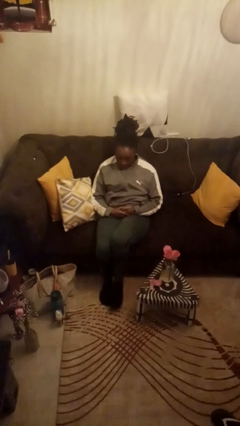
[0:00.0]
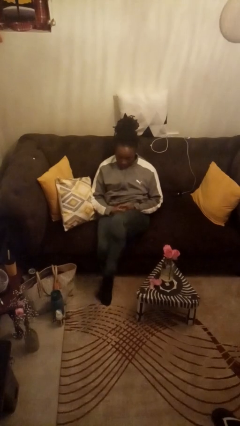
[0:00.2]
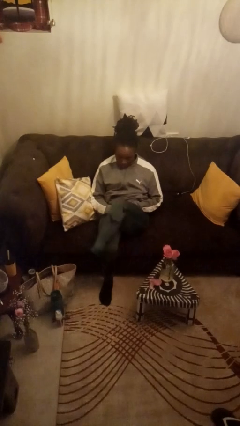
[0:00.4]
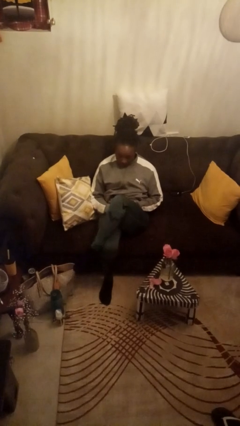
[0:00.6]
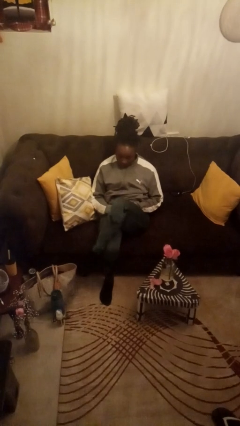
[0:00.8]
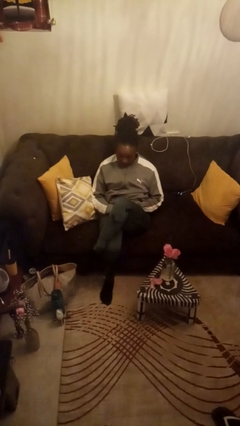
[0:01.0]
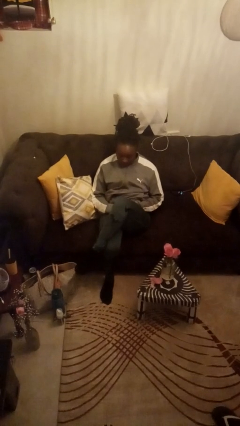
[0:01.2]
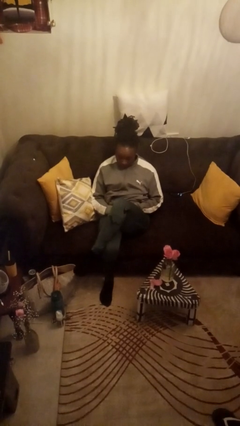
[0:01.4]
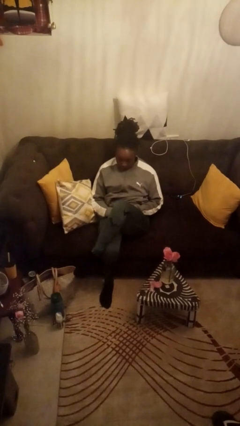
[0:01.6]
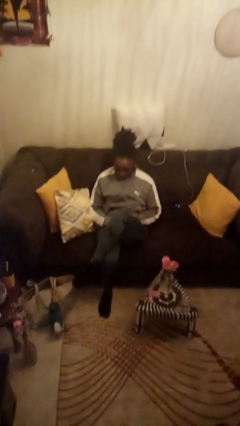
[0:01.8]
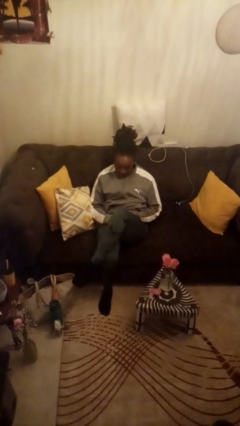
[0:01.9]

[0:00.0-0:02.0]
person crosses legs

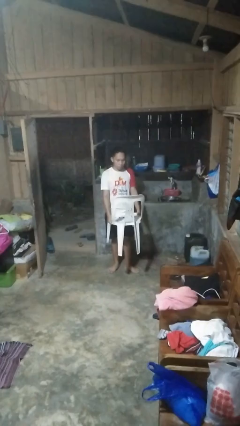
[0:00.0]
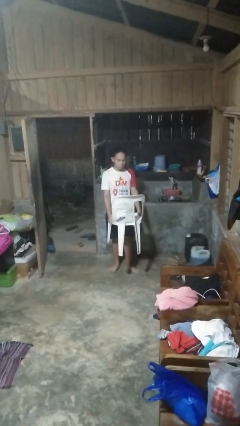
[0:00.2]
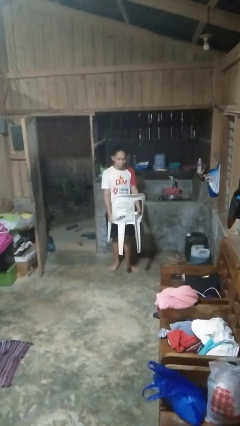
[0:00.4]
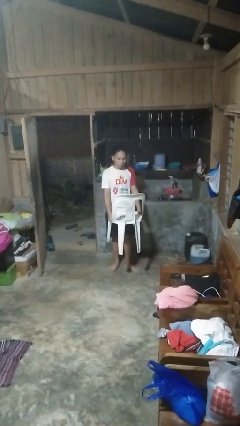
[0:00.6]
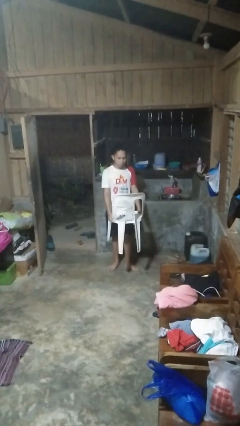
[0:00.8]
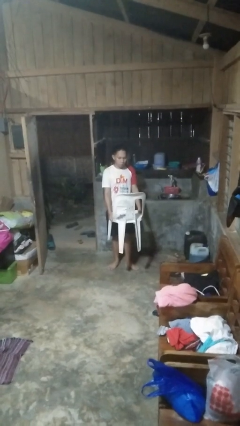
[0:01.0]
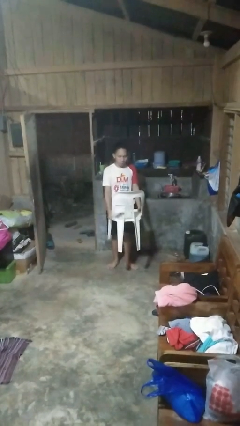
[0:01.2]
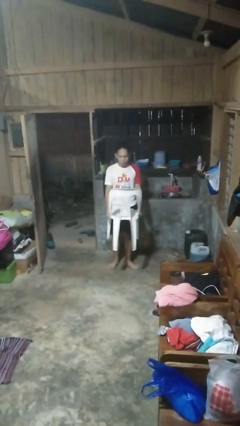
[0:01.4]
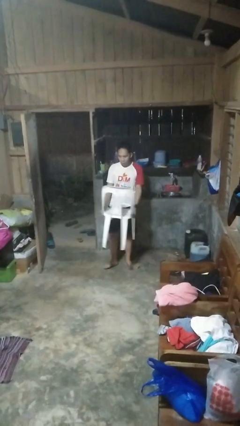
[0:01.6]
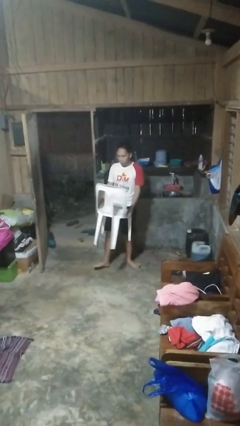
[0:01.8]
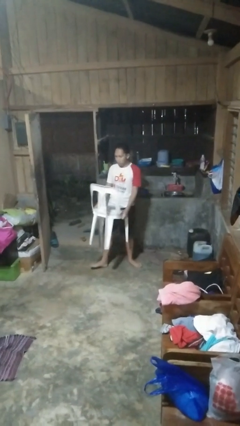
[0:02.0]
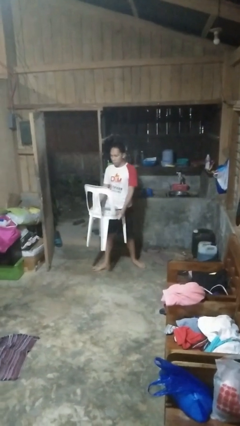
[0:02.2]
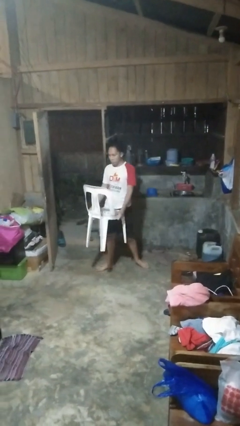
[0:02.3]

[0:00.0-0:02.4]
person carries furniture

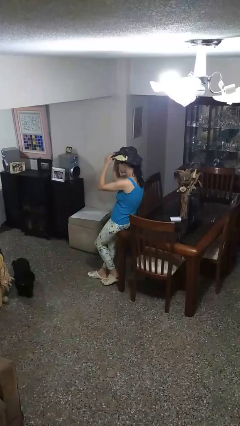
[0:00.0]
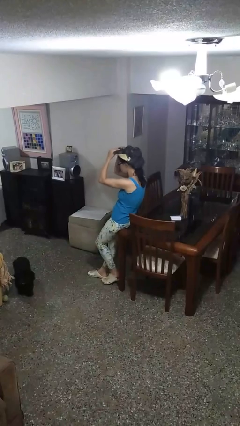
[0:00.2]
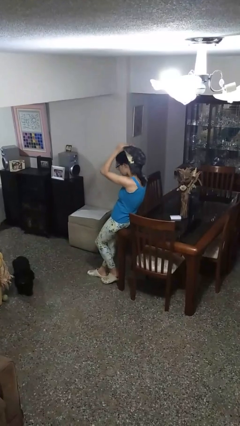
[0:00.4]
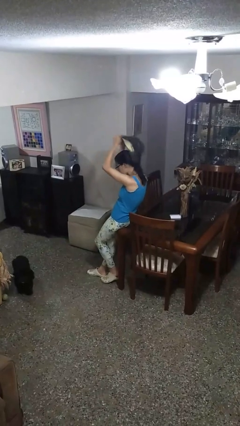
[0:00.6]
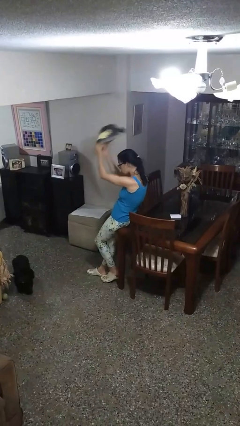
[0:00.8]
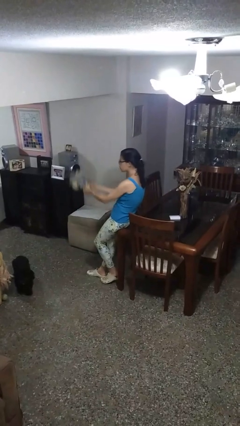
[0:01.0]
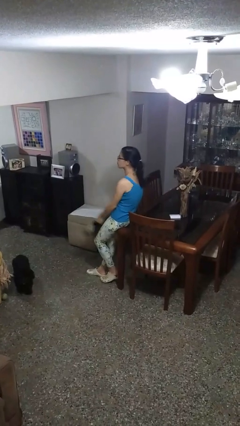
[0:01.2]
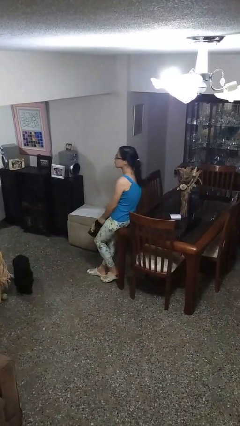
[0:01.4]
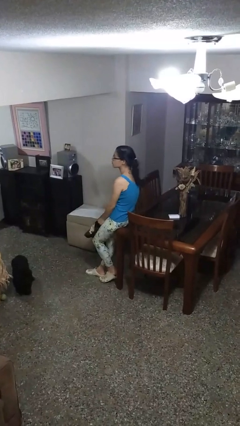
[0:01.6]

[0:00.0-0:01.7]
person takes off hat

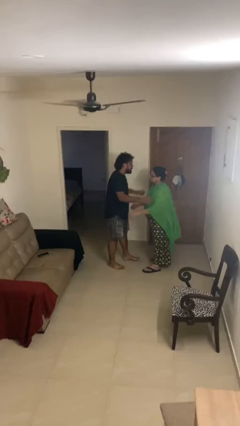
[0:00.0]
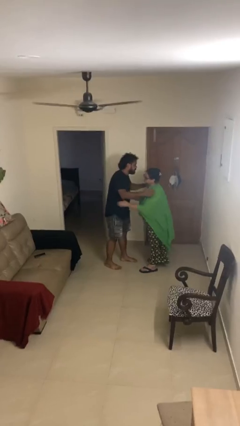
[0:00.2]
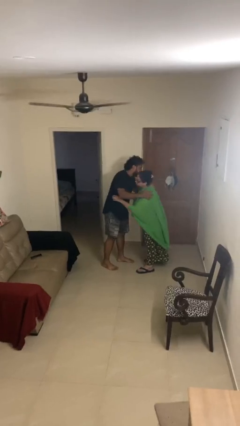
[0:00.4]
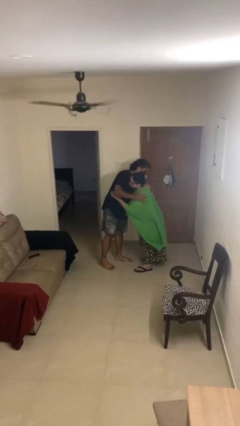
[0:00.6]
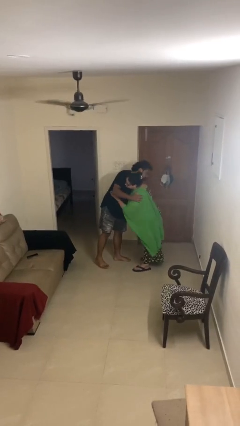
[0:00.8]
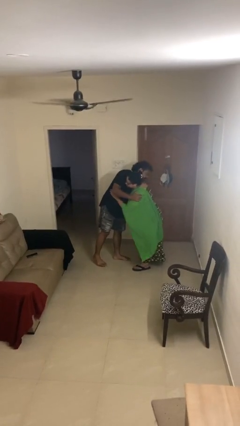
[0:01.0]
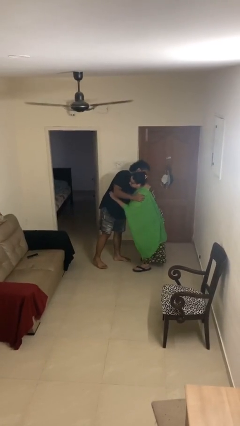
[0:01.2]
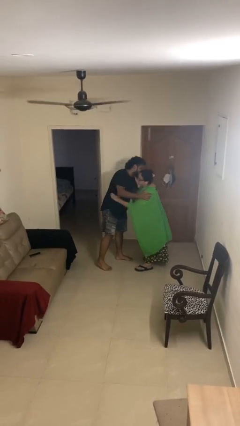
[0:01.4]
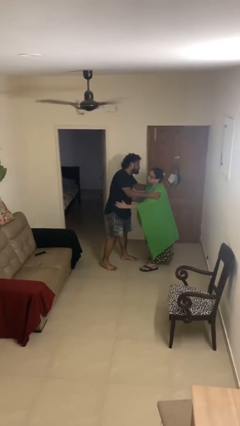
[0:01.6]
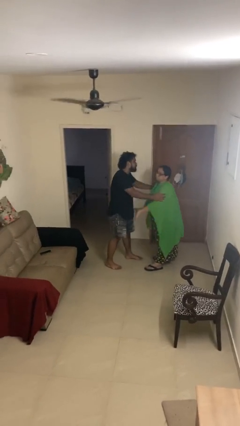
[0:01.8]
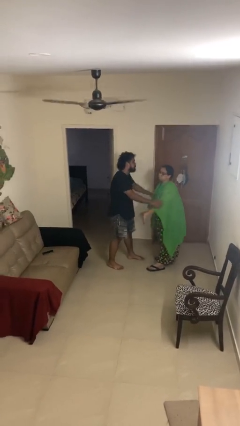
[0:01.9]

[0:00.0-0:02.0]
person embraces person

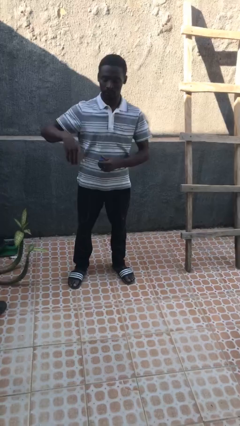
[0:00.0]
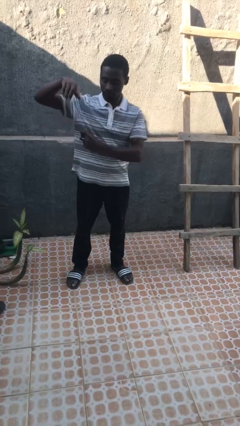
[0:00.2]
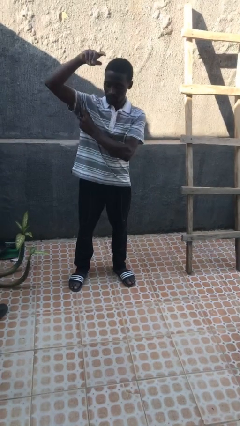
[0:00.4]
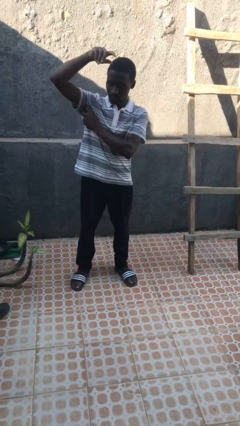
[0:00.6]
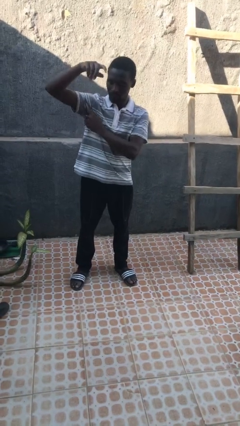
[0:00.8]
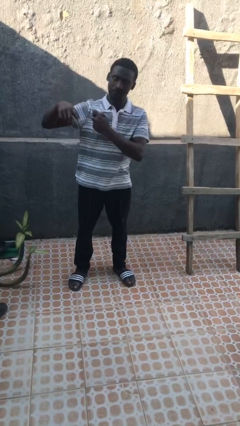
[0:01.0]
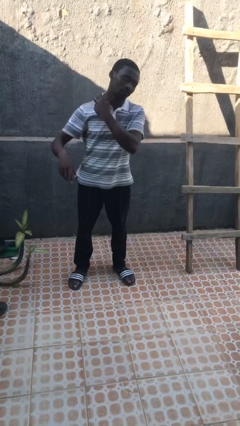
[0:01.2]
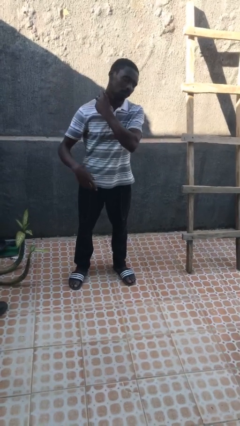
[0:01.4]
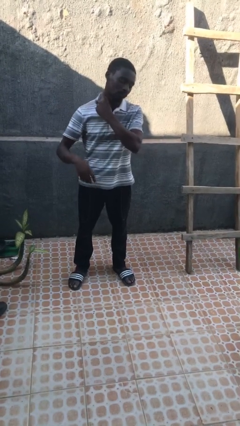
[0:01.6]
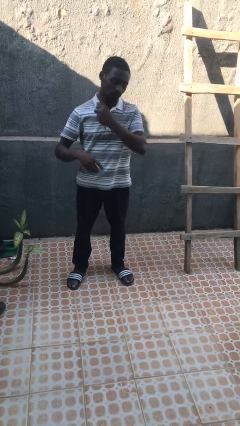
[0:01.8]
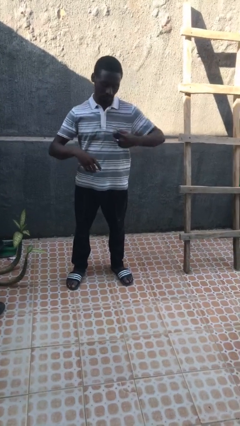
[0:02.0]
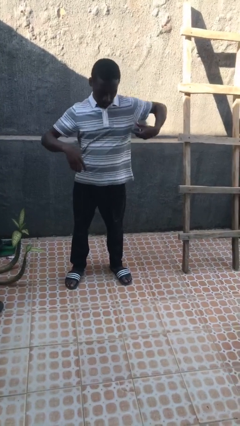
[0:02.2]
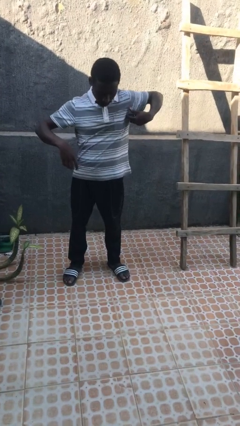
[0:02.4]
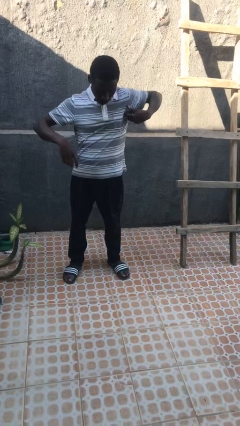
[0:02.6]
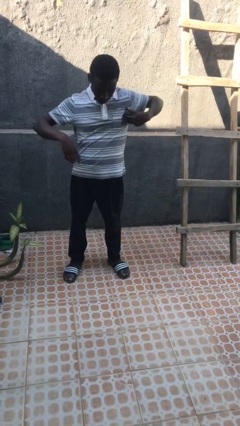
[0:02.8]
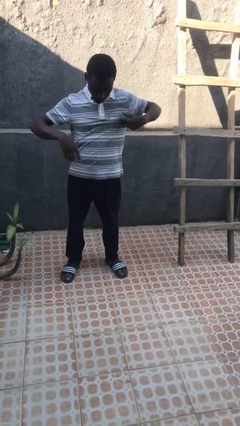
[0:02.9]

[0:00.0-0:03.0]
person applies deodorant

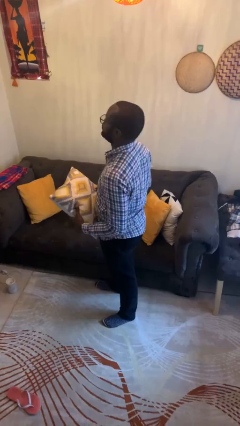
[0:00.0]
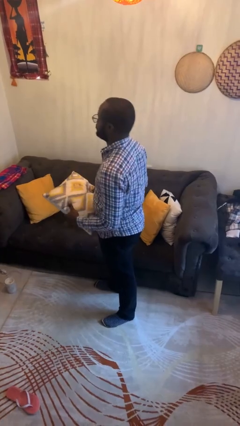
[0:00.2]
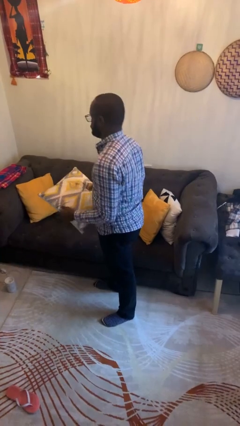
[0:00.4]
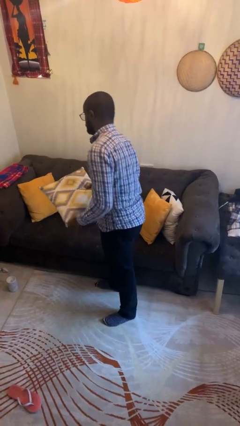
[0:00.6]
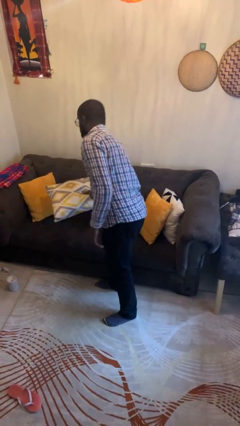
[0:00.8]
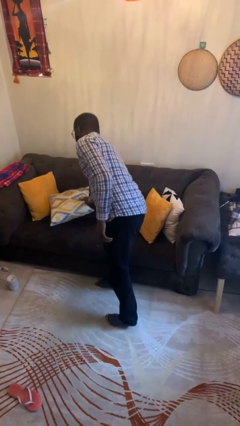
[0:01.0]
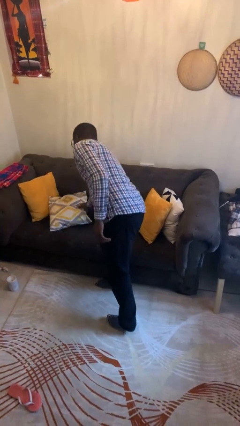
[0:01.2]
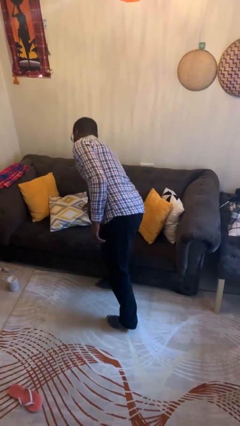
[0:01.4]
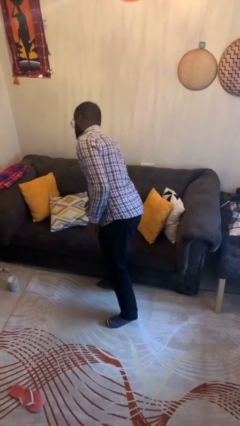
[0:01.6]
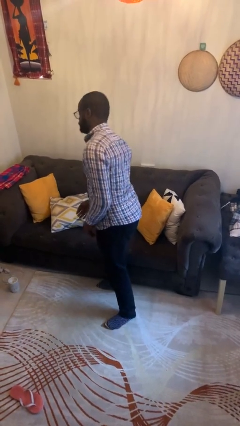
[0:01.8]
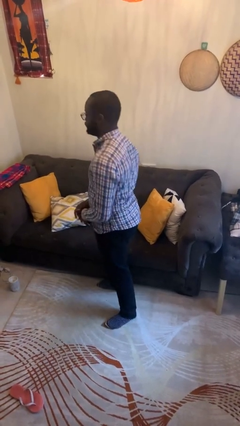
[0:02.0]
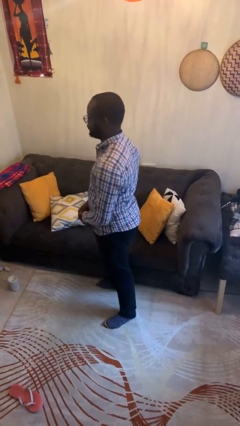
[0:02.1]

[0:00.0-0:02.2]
person puts down object on couch

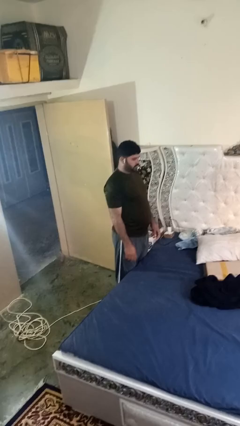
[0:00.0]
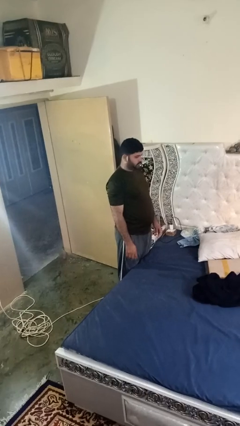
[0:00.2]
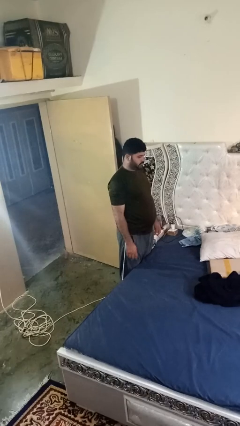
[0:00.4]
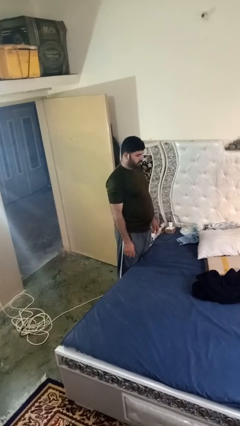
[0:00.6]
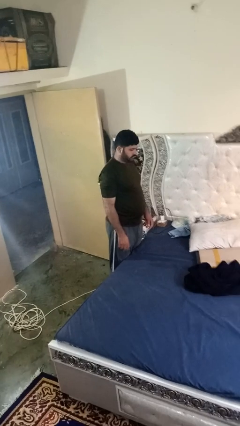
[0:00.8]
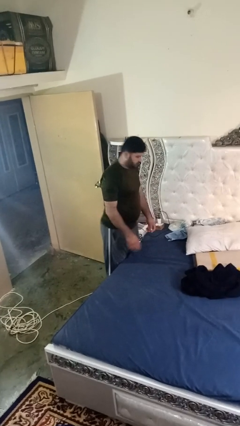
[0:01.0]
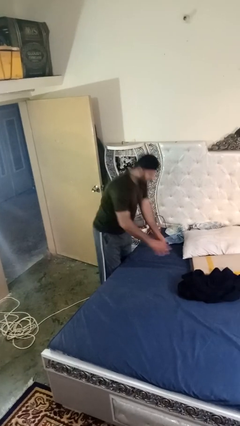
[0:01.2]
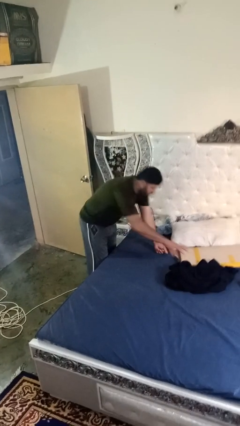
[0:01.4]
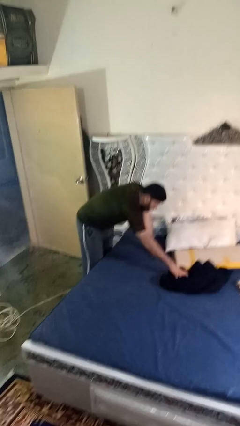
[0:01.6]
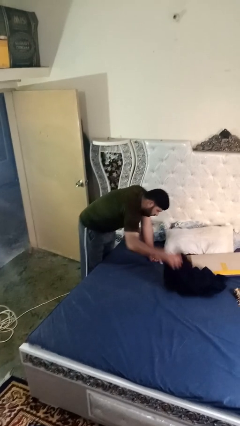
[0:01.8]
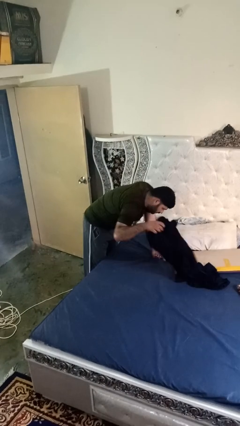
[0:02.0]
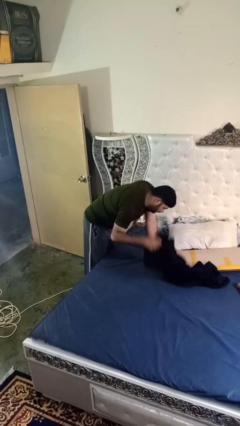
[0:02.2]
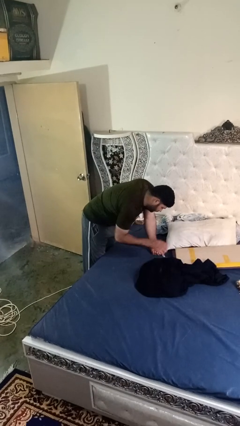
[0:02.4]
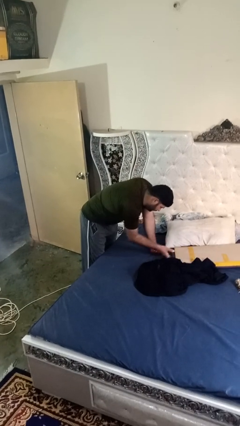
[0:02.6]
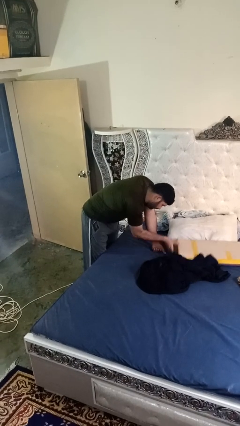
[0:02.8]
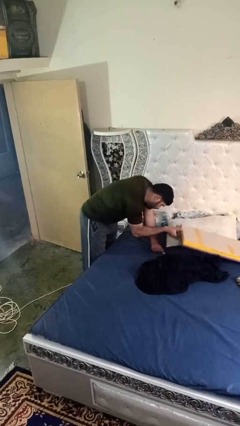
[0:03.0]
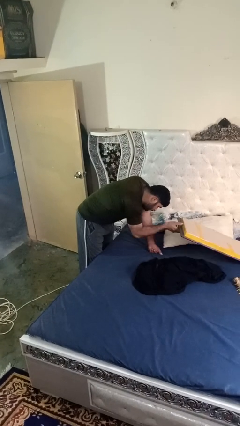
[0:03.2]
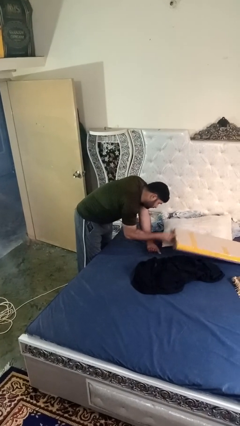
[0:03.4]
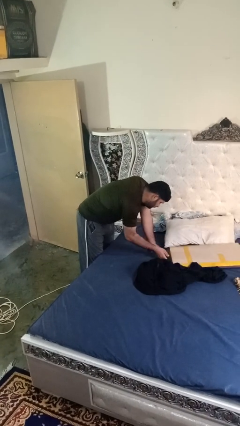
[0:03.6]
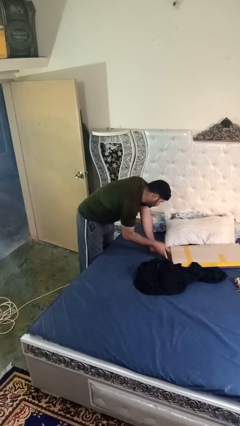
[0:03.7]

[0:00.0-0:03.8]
person searches under bed
